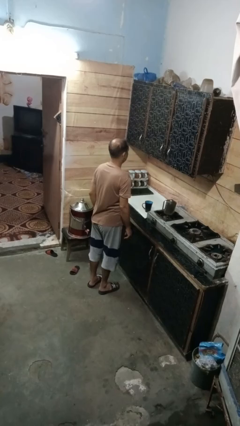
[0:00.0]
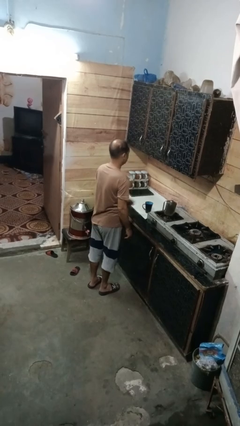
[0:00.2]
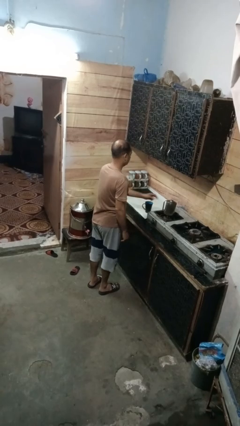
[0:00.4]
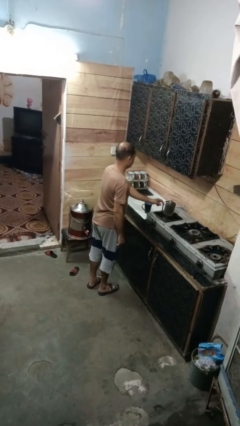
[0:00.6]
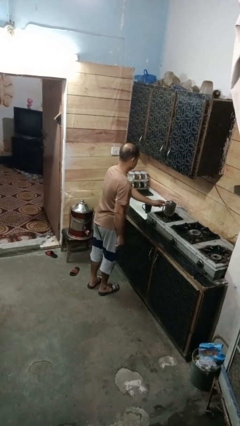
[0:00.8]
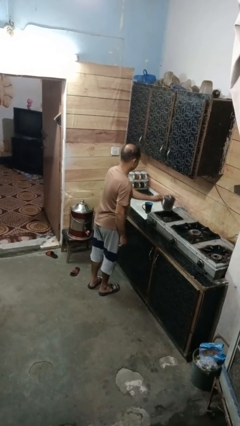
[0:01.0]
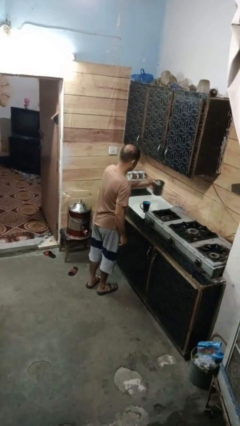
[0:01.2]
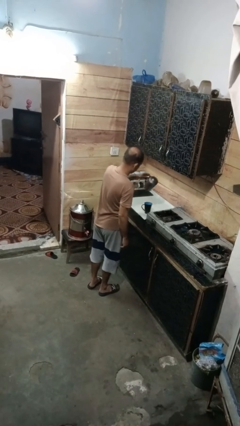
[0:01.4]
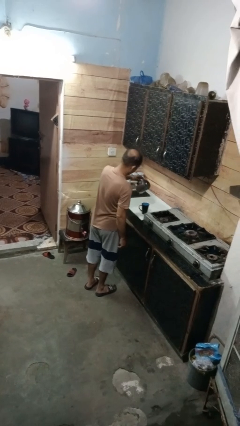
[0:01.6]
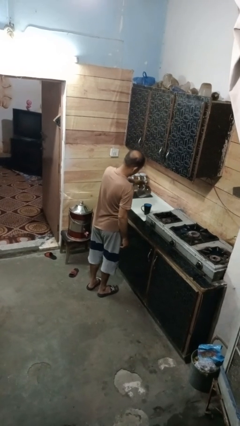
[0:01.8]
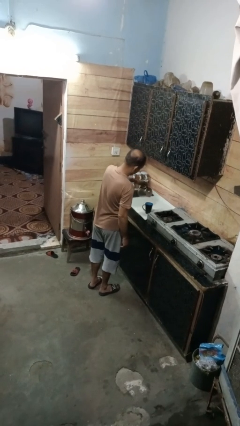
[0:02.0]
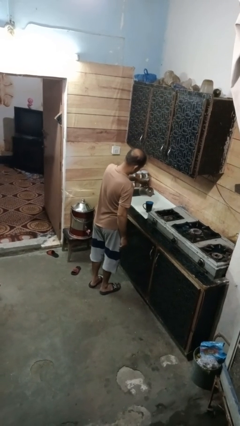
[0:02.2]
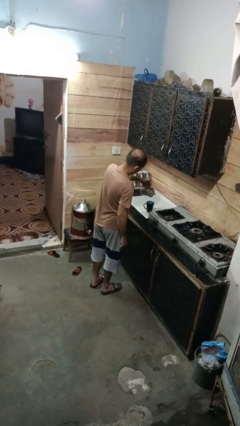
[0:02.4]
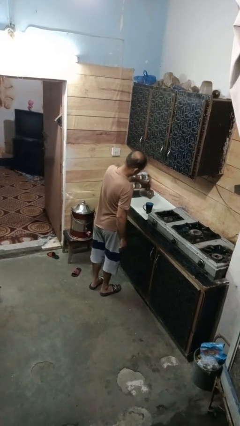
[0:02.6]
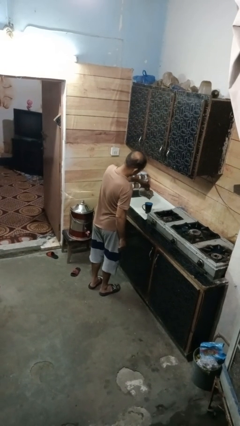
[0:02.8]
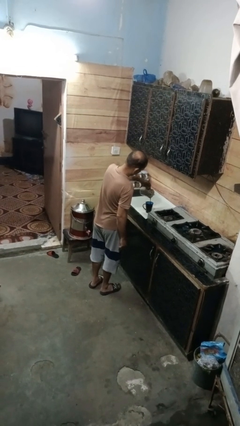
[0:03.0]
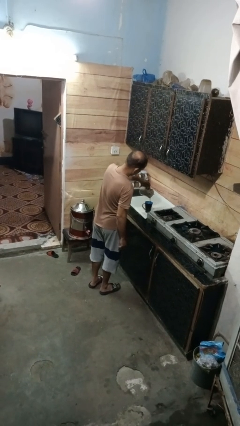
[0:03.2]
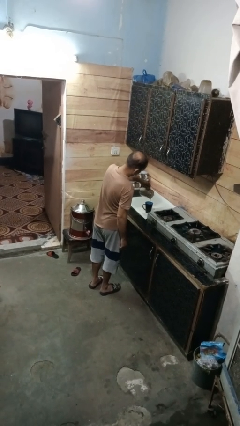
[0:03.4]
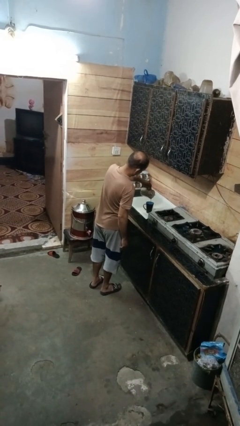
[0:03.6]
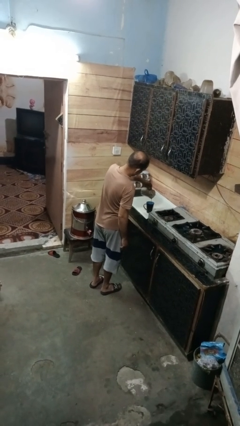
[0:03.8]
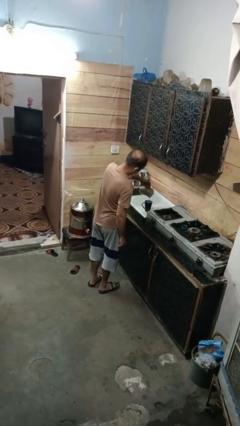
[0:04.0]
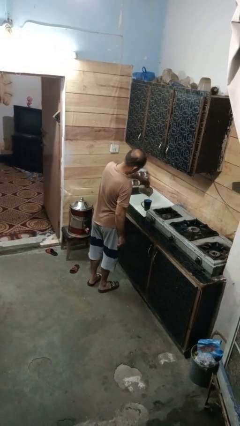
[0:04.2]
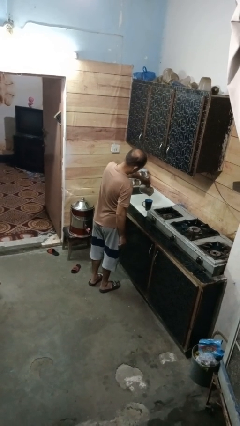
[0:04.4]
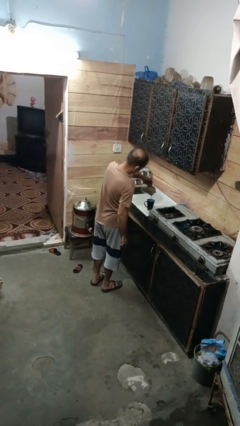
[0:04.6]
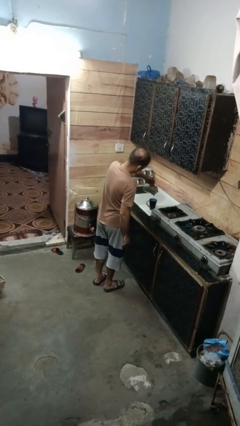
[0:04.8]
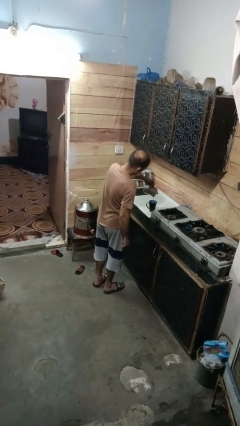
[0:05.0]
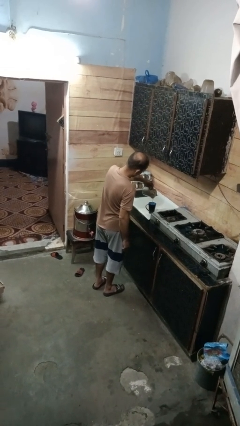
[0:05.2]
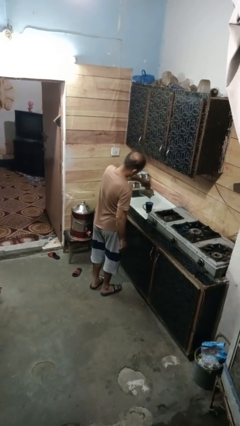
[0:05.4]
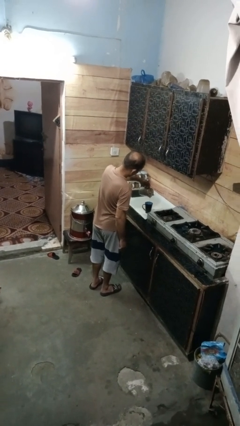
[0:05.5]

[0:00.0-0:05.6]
person pours coffee into mug

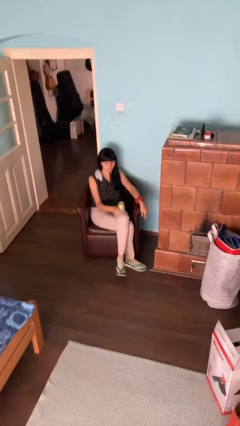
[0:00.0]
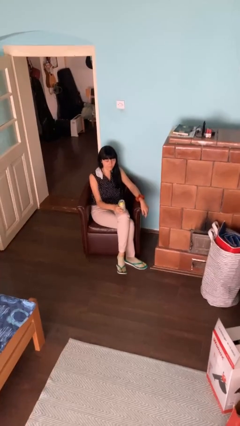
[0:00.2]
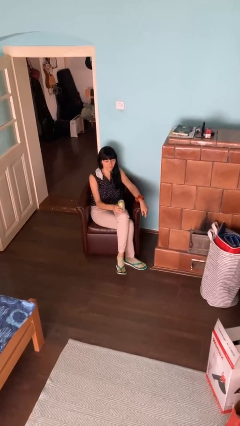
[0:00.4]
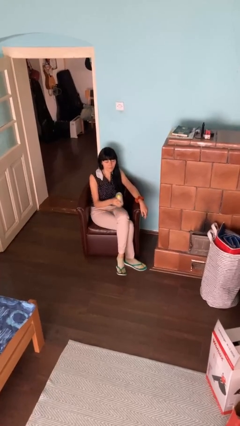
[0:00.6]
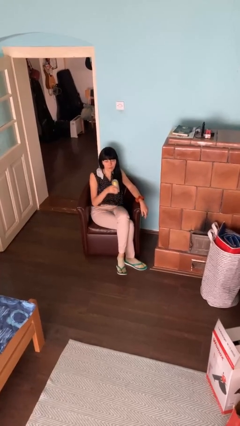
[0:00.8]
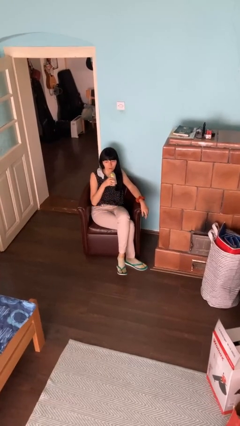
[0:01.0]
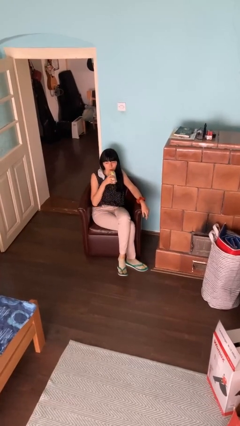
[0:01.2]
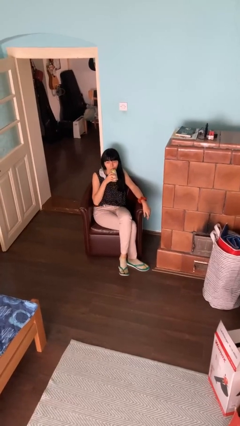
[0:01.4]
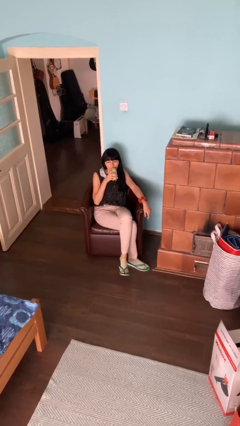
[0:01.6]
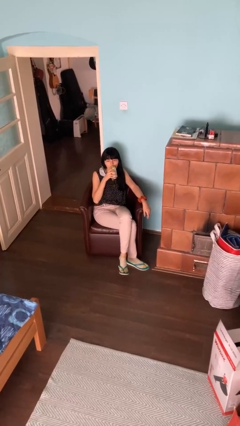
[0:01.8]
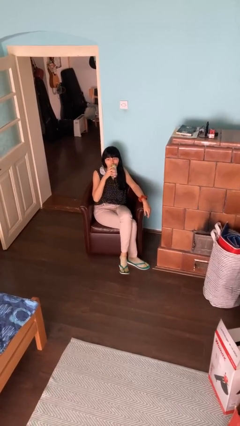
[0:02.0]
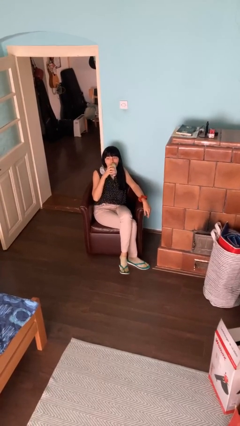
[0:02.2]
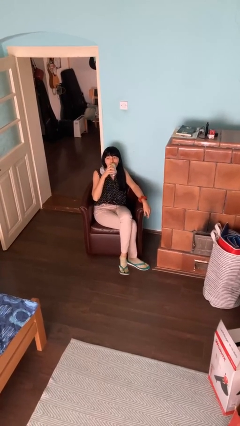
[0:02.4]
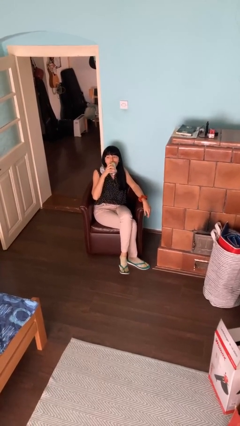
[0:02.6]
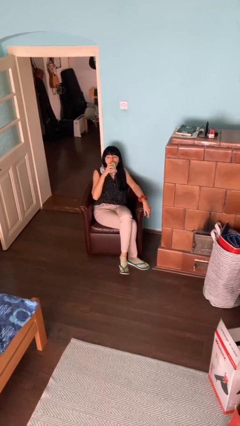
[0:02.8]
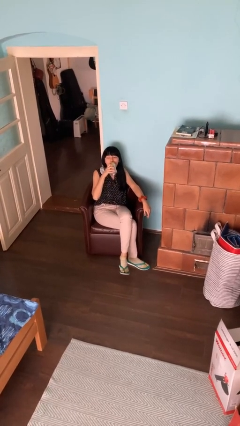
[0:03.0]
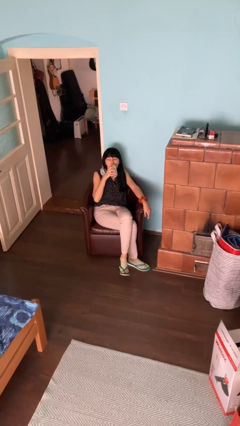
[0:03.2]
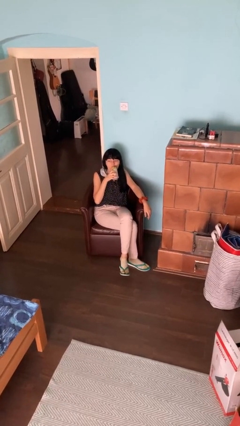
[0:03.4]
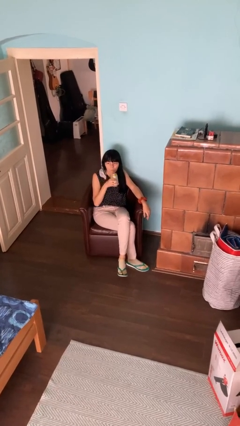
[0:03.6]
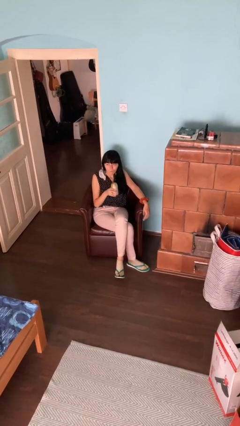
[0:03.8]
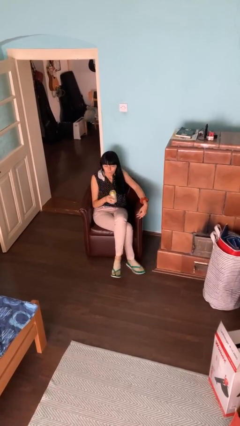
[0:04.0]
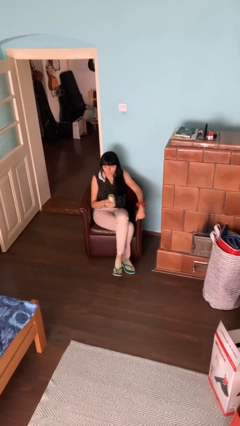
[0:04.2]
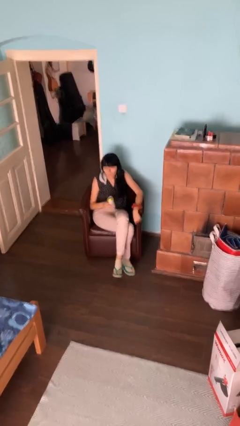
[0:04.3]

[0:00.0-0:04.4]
person drinks from beverage can

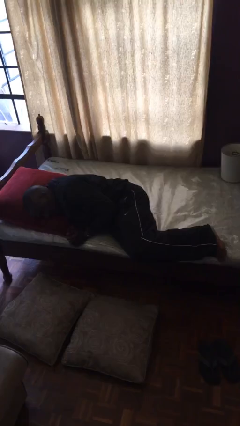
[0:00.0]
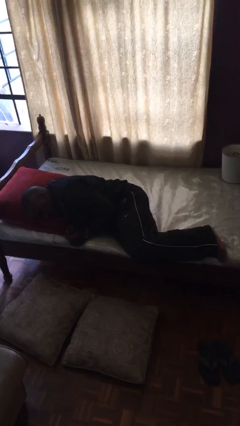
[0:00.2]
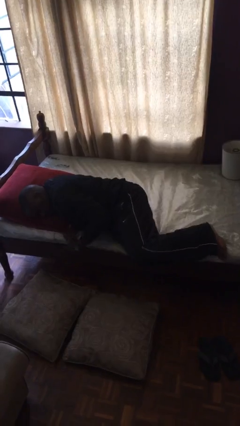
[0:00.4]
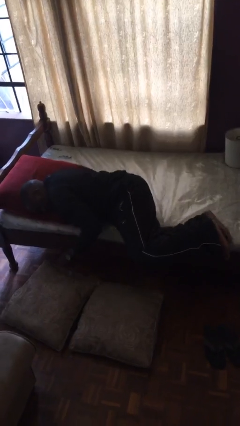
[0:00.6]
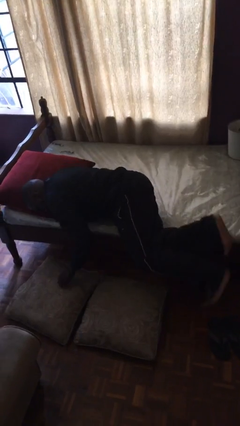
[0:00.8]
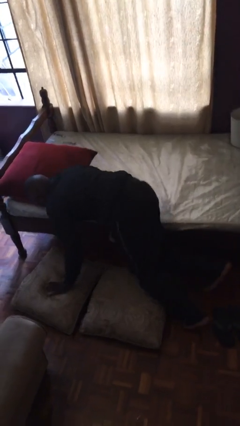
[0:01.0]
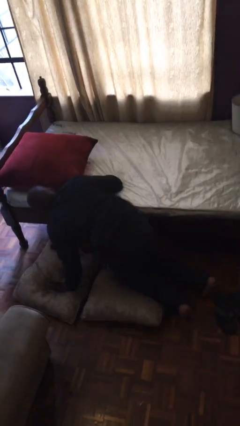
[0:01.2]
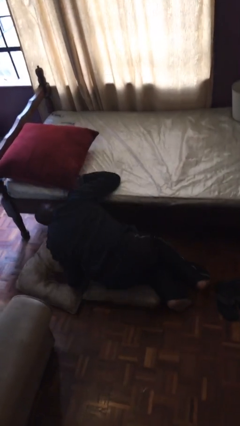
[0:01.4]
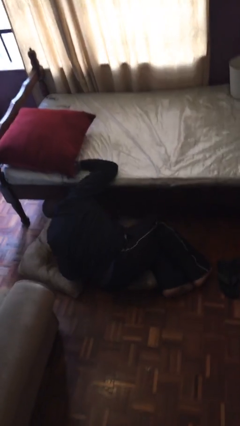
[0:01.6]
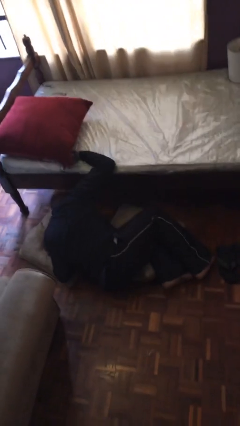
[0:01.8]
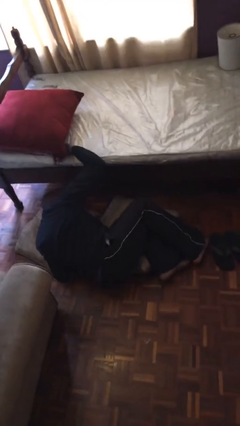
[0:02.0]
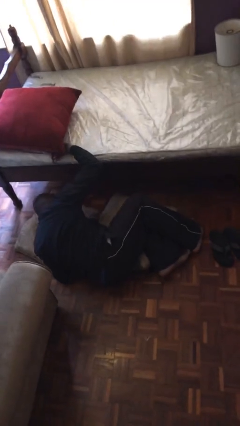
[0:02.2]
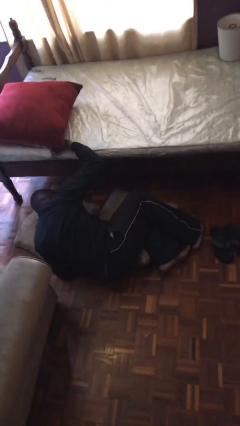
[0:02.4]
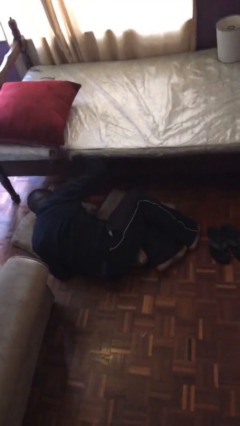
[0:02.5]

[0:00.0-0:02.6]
person falls from bed

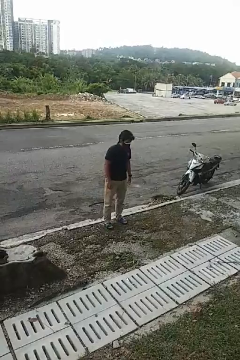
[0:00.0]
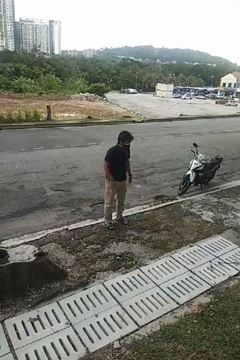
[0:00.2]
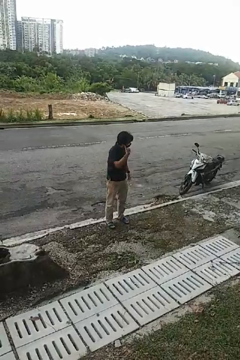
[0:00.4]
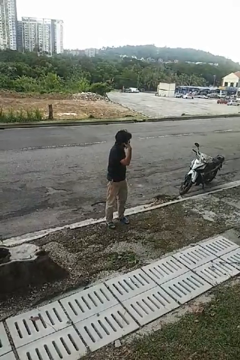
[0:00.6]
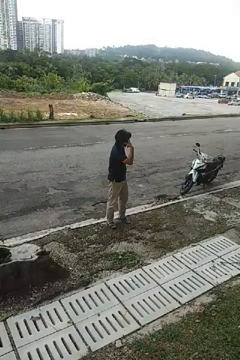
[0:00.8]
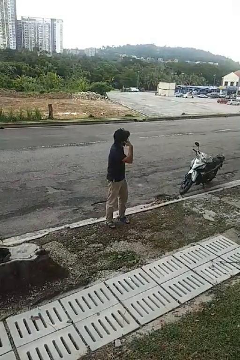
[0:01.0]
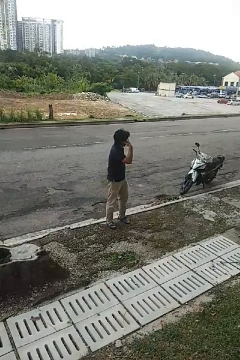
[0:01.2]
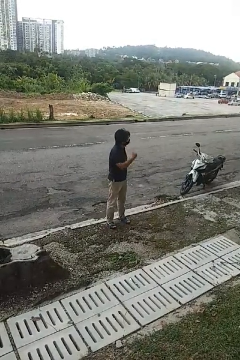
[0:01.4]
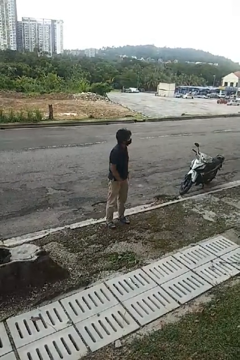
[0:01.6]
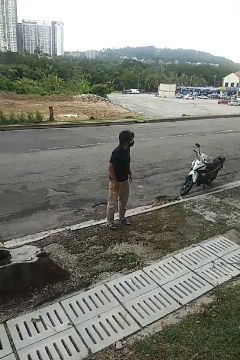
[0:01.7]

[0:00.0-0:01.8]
person gestures call me

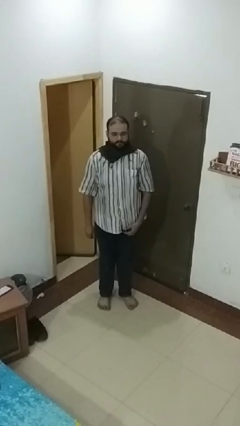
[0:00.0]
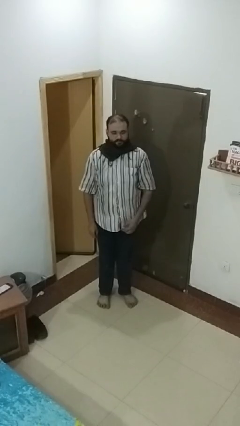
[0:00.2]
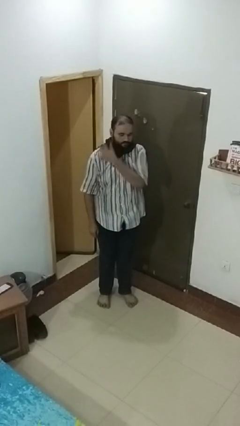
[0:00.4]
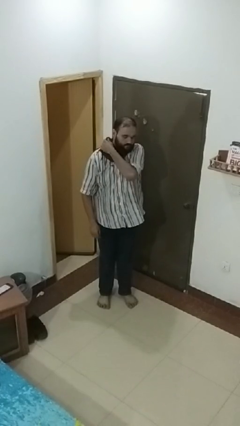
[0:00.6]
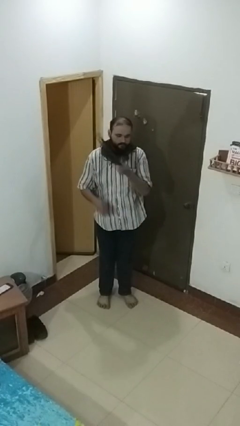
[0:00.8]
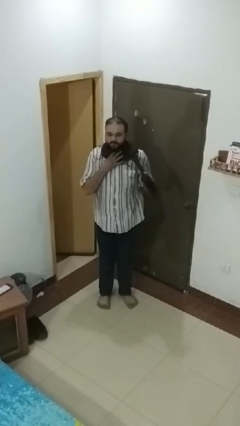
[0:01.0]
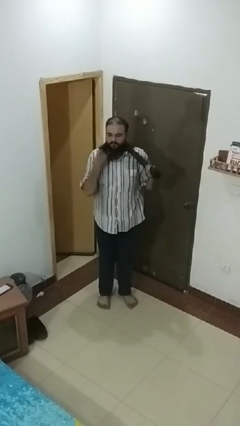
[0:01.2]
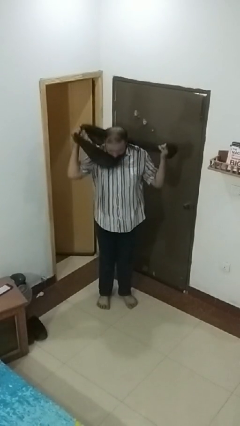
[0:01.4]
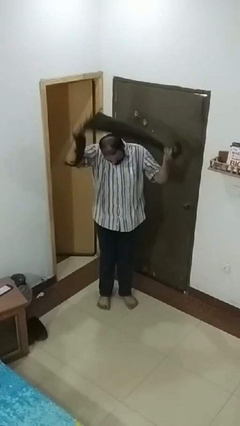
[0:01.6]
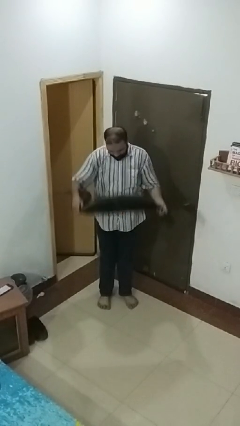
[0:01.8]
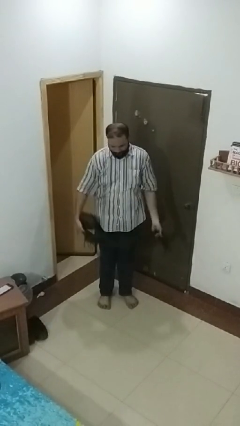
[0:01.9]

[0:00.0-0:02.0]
person takes off scarf

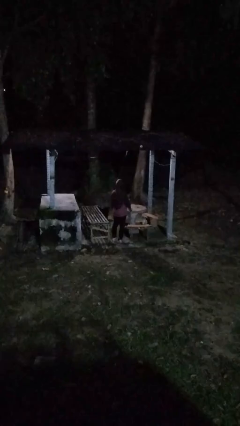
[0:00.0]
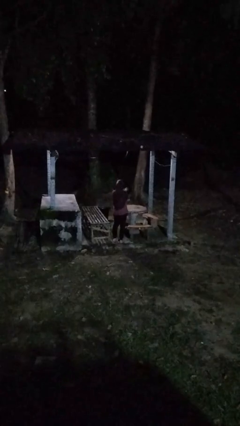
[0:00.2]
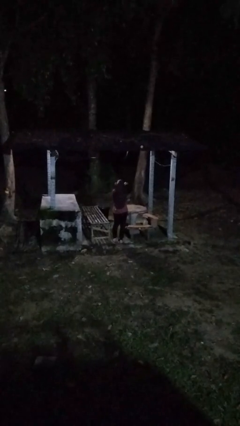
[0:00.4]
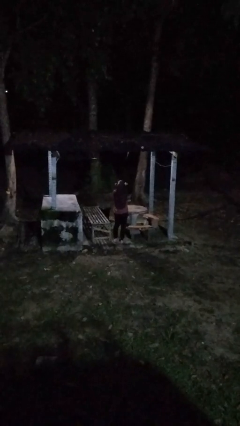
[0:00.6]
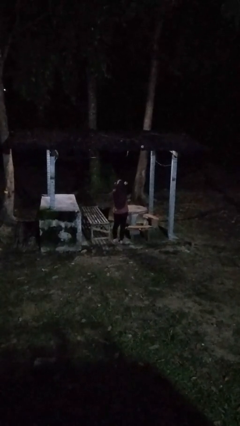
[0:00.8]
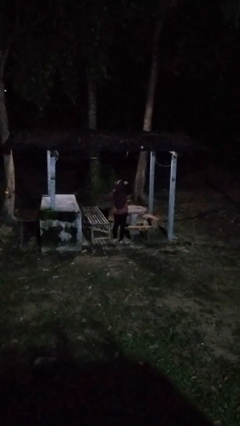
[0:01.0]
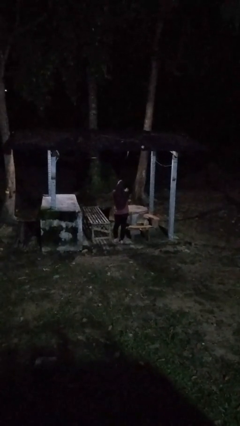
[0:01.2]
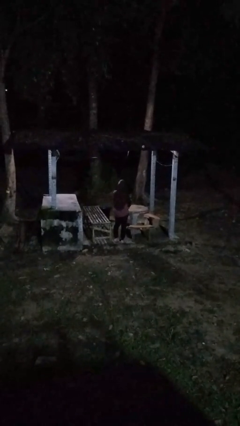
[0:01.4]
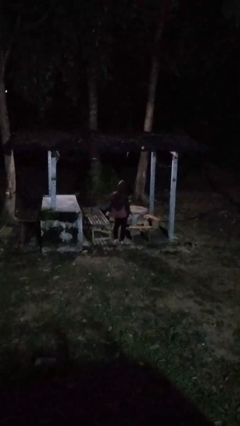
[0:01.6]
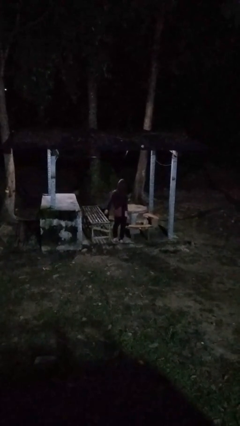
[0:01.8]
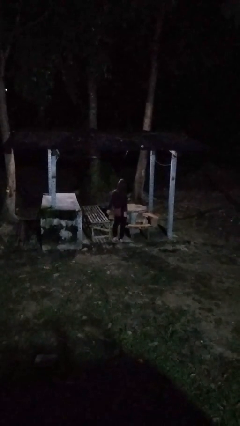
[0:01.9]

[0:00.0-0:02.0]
person gestures arms x
